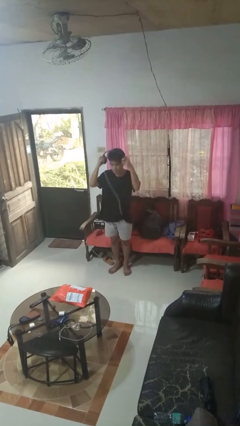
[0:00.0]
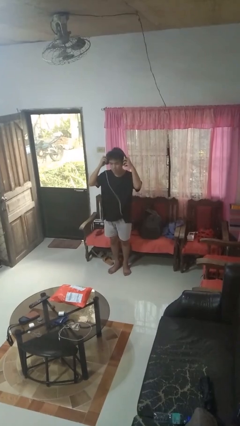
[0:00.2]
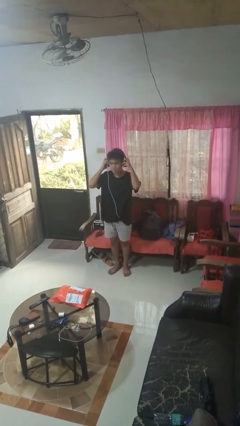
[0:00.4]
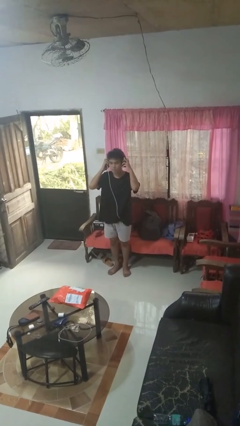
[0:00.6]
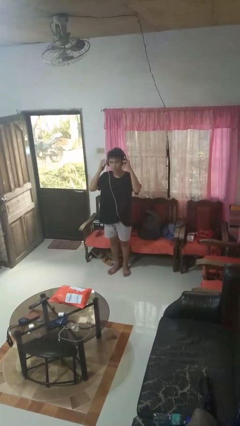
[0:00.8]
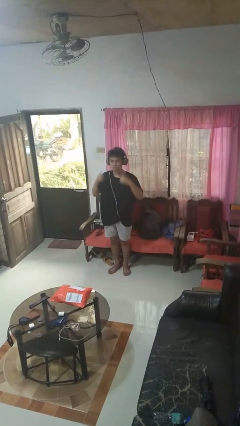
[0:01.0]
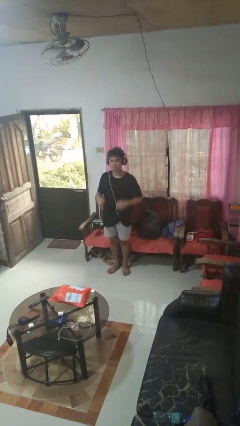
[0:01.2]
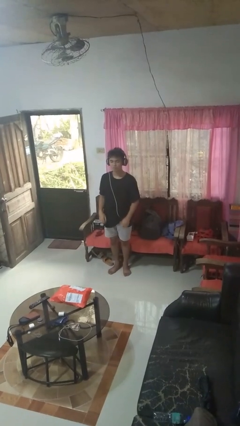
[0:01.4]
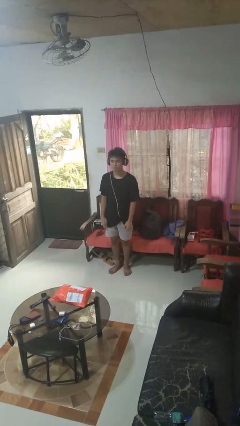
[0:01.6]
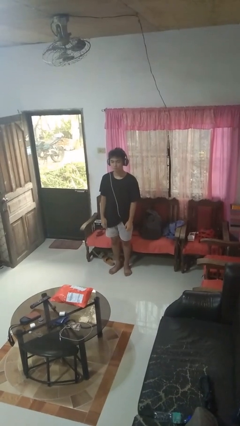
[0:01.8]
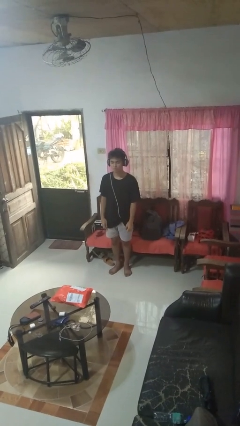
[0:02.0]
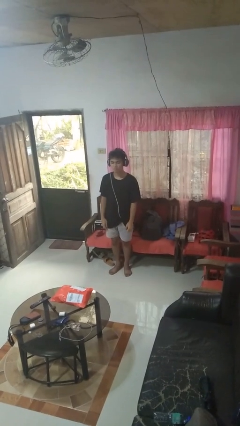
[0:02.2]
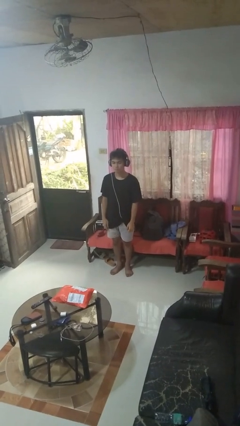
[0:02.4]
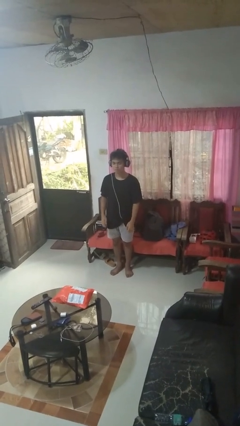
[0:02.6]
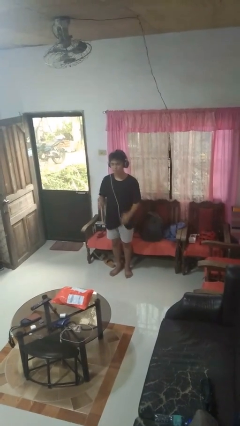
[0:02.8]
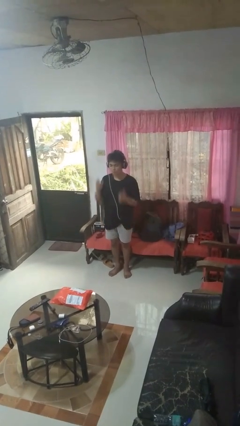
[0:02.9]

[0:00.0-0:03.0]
person puts on headphones

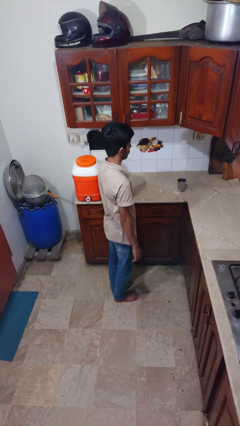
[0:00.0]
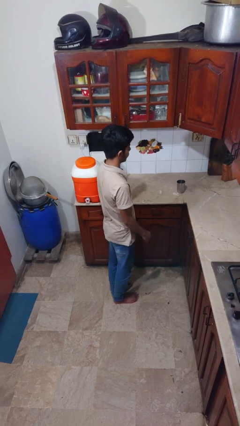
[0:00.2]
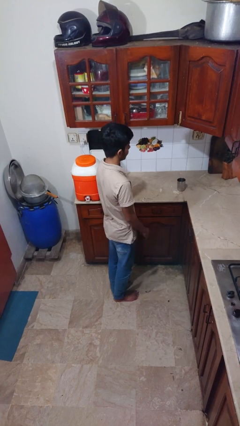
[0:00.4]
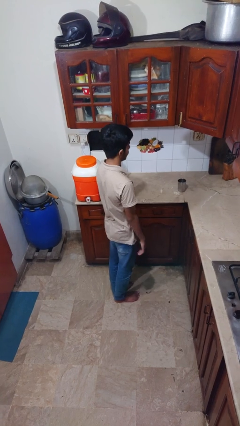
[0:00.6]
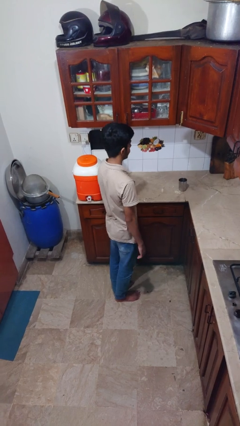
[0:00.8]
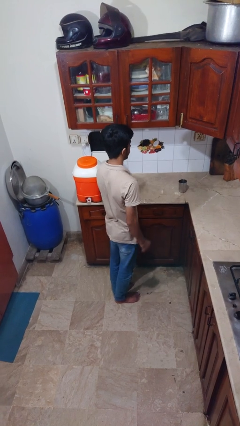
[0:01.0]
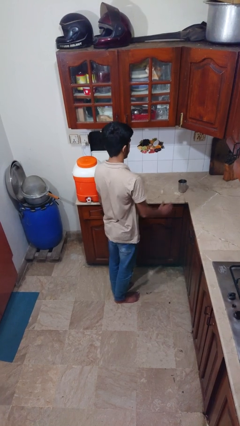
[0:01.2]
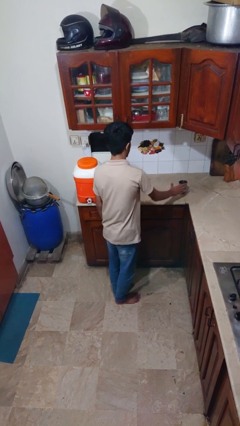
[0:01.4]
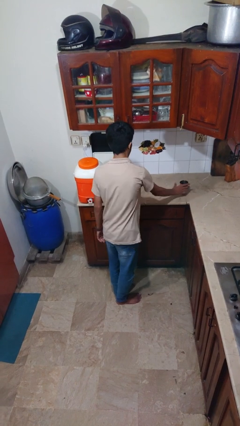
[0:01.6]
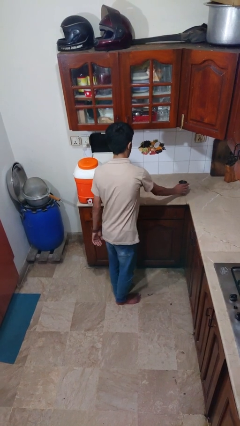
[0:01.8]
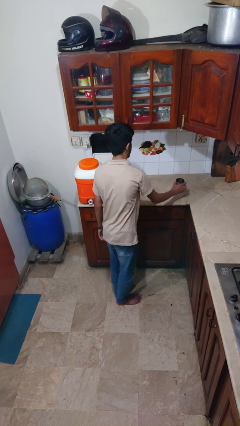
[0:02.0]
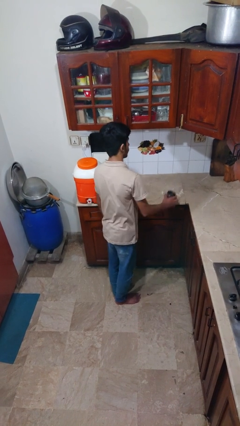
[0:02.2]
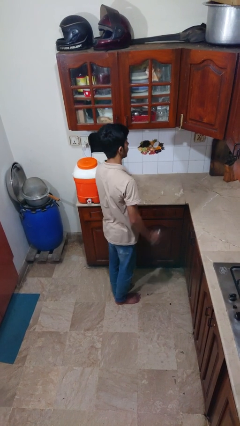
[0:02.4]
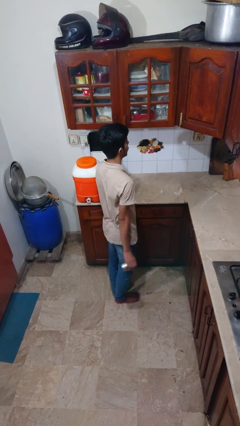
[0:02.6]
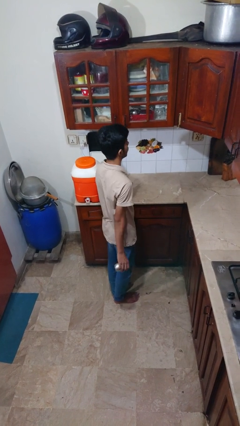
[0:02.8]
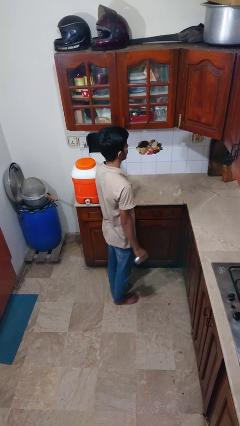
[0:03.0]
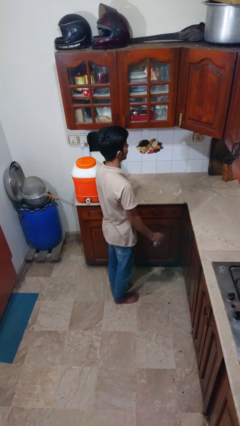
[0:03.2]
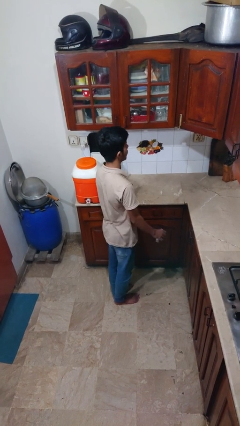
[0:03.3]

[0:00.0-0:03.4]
person picks up object from countertop

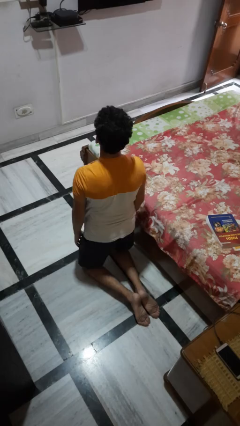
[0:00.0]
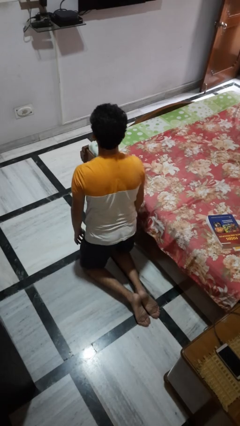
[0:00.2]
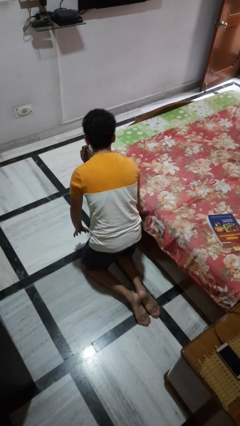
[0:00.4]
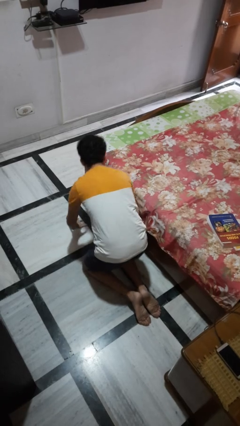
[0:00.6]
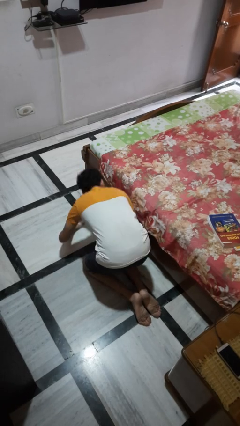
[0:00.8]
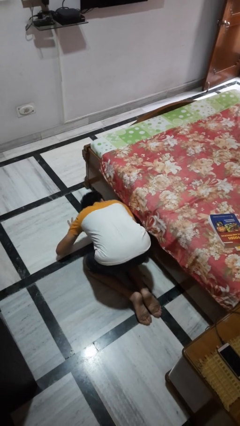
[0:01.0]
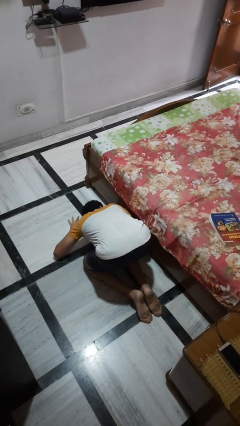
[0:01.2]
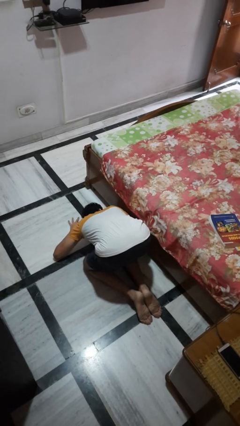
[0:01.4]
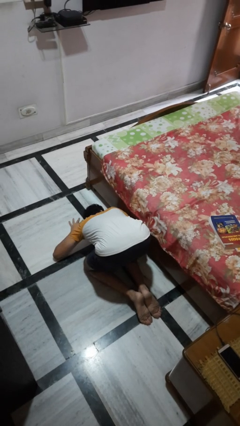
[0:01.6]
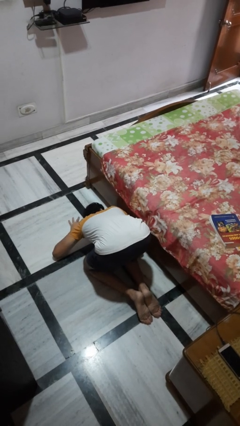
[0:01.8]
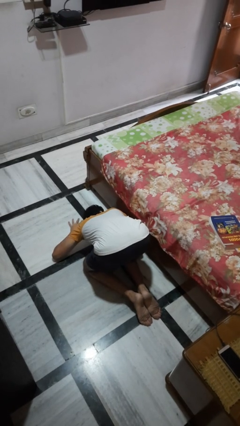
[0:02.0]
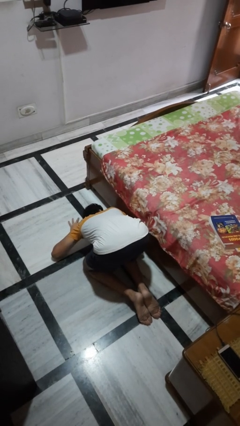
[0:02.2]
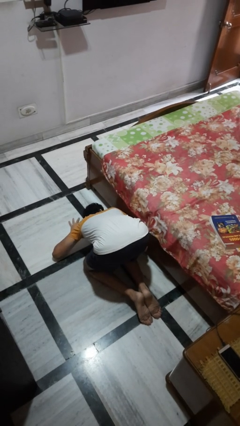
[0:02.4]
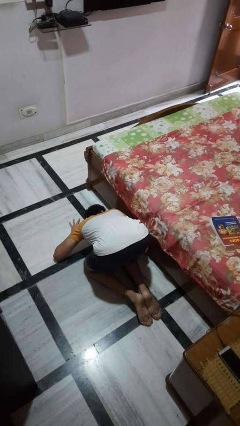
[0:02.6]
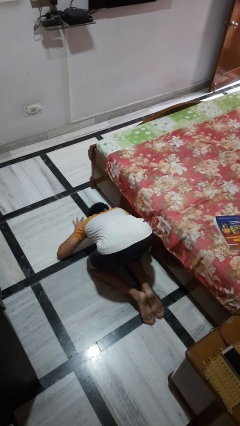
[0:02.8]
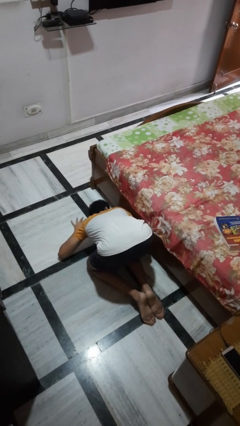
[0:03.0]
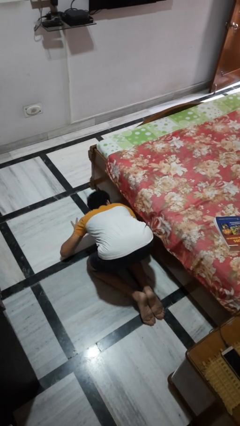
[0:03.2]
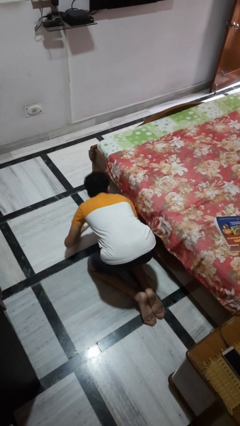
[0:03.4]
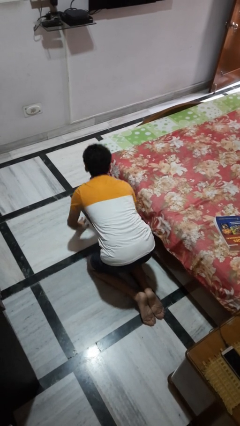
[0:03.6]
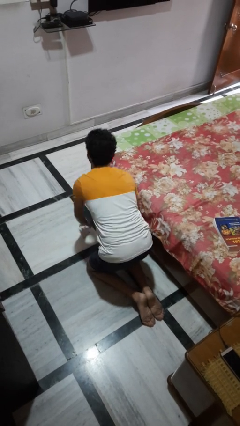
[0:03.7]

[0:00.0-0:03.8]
person searches under bed

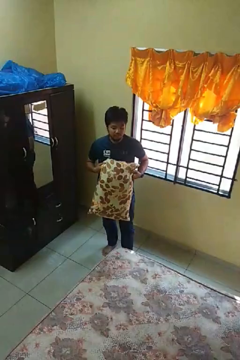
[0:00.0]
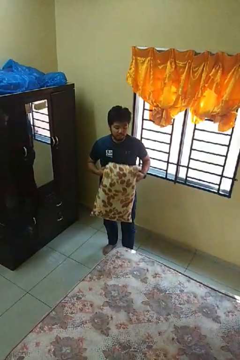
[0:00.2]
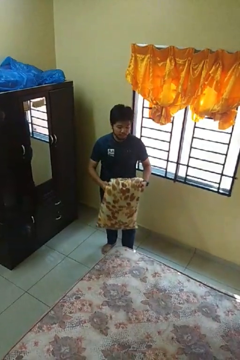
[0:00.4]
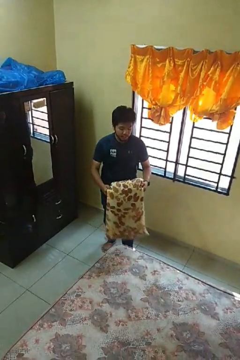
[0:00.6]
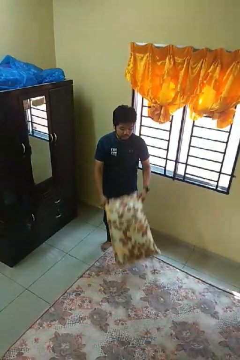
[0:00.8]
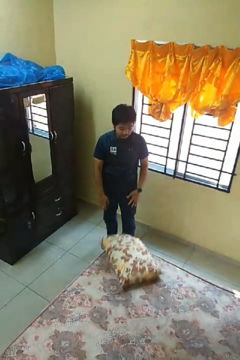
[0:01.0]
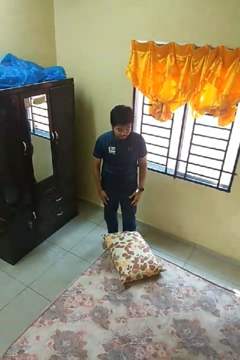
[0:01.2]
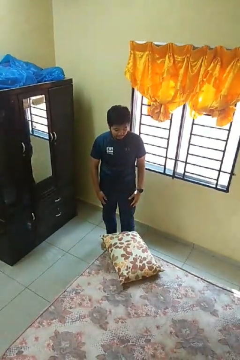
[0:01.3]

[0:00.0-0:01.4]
person puts down object on bed

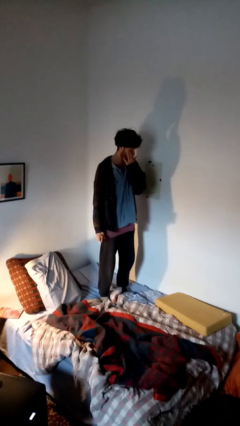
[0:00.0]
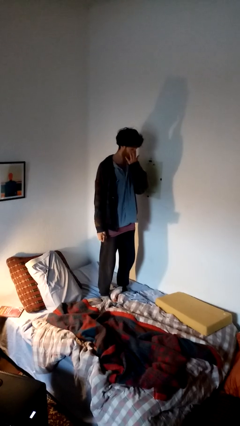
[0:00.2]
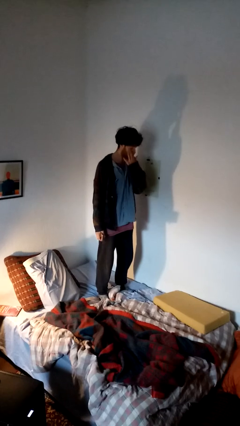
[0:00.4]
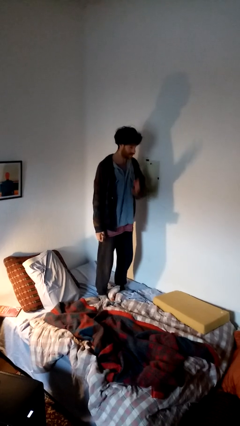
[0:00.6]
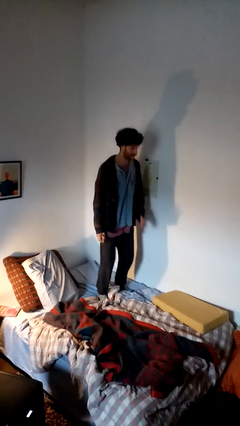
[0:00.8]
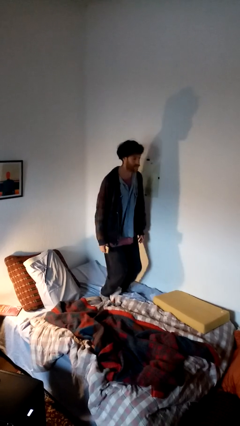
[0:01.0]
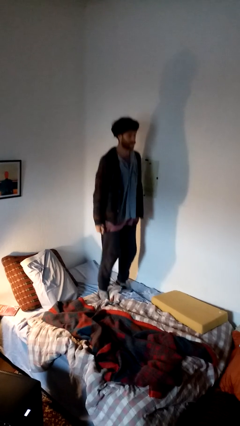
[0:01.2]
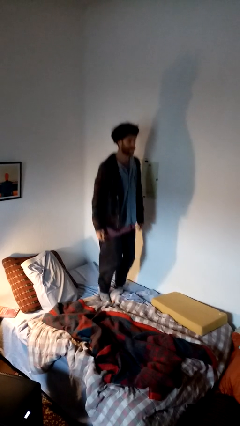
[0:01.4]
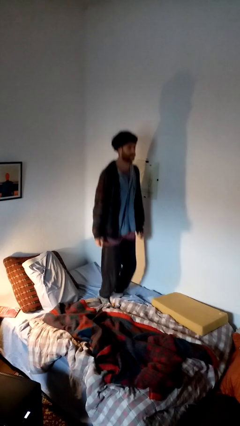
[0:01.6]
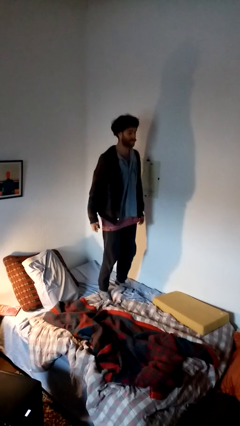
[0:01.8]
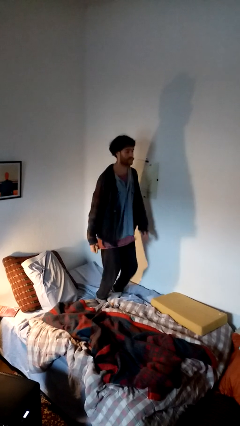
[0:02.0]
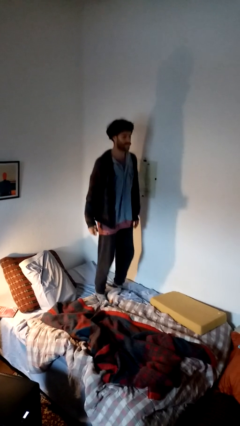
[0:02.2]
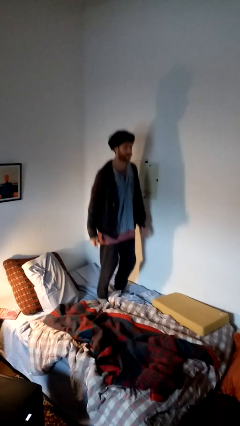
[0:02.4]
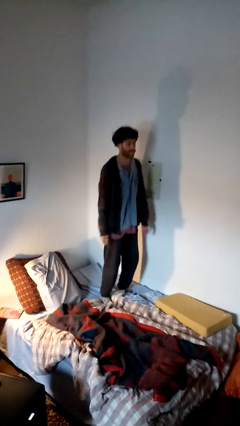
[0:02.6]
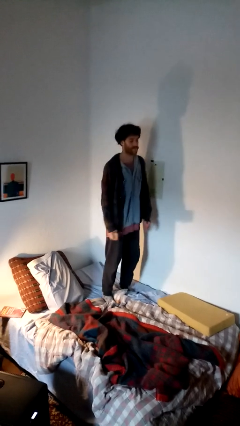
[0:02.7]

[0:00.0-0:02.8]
person jumps on bed

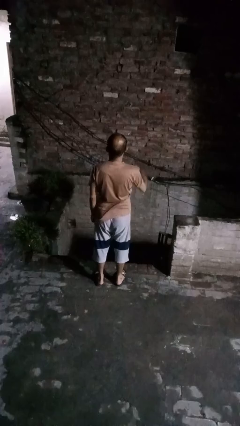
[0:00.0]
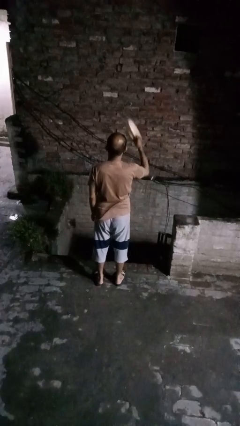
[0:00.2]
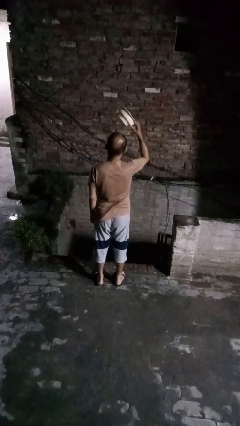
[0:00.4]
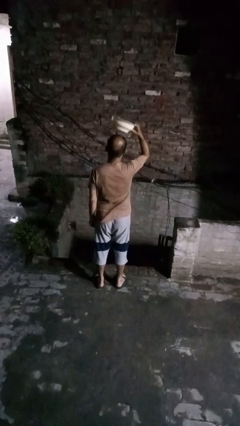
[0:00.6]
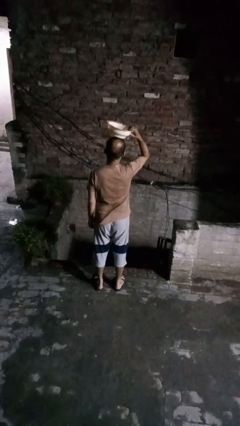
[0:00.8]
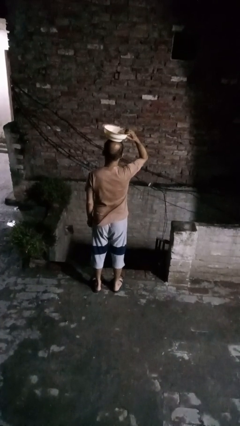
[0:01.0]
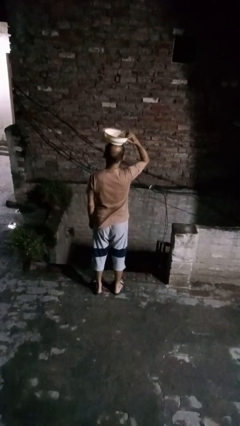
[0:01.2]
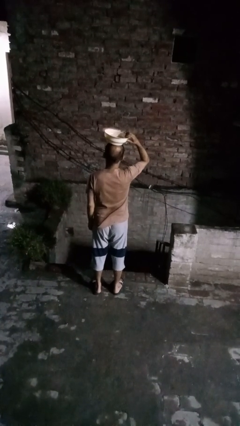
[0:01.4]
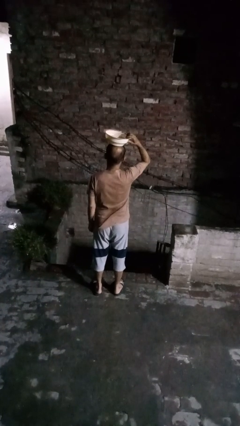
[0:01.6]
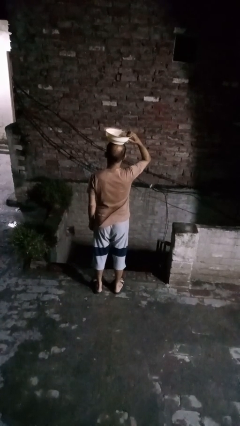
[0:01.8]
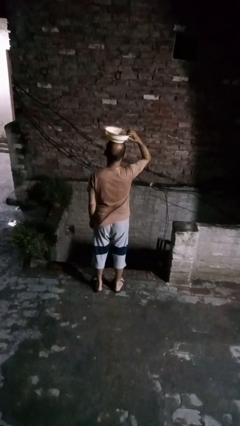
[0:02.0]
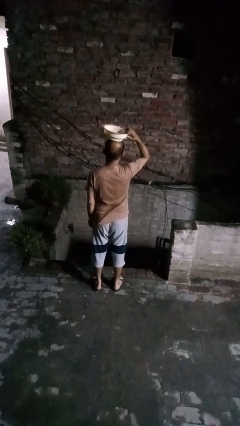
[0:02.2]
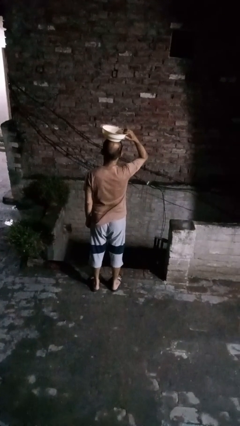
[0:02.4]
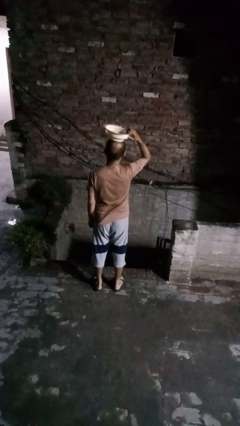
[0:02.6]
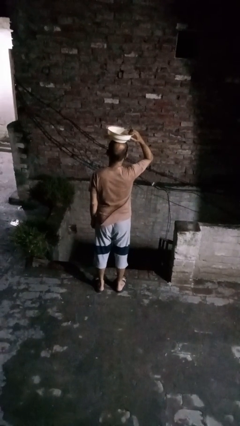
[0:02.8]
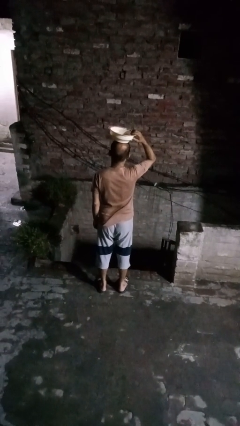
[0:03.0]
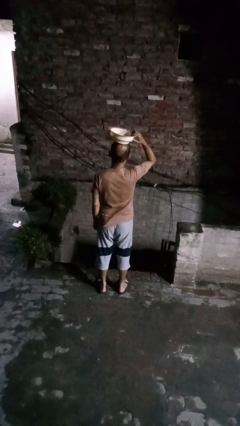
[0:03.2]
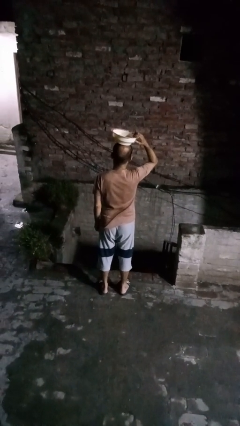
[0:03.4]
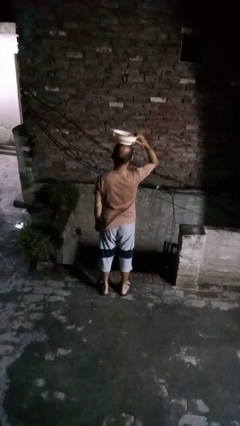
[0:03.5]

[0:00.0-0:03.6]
person holds object above head
